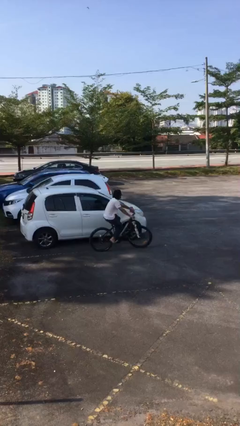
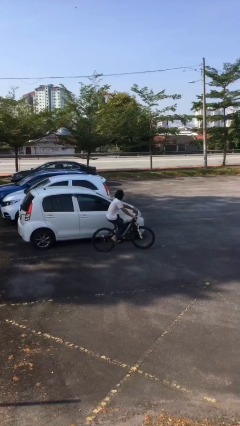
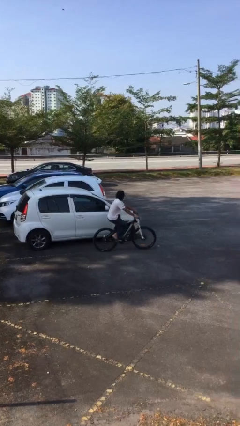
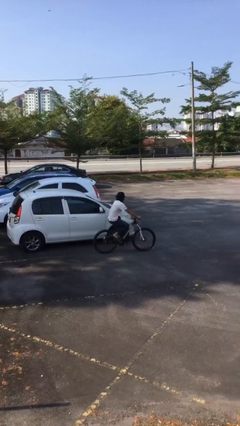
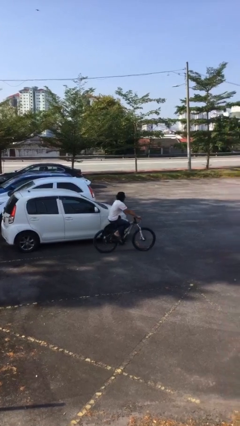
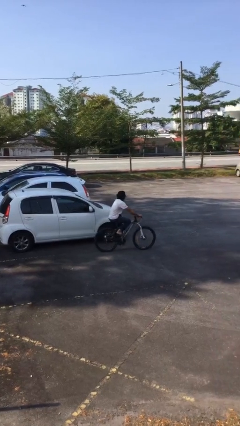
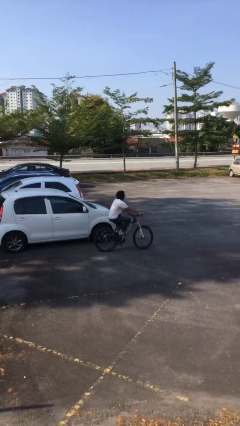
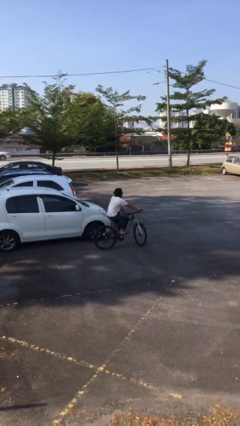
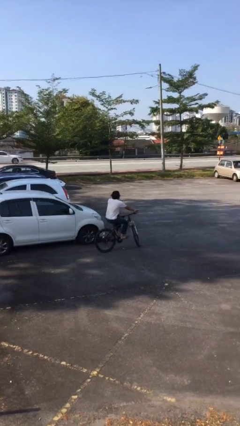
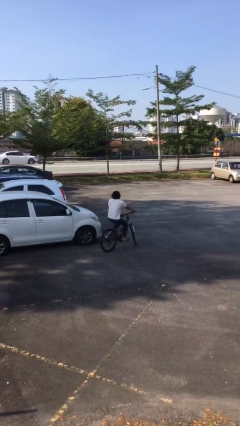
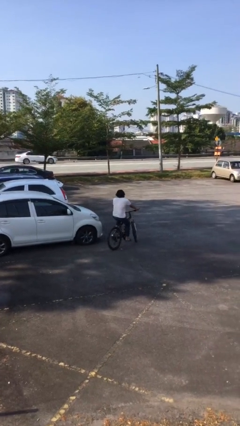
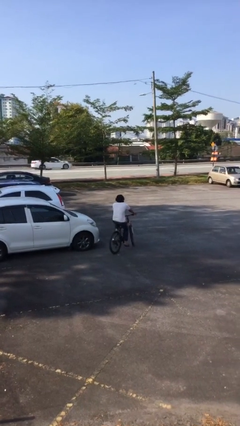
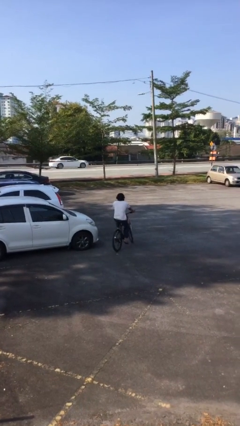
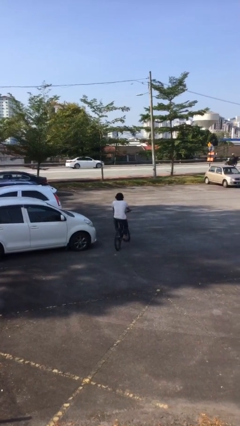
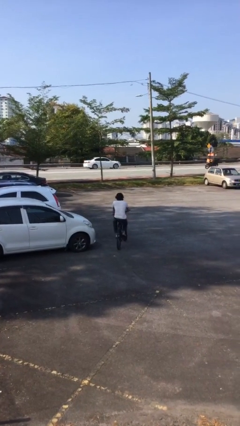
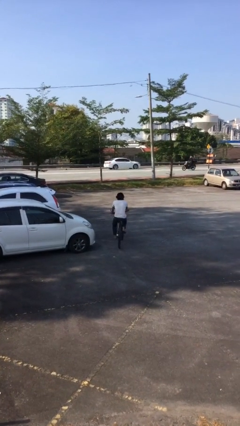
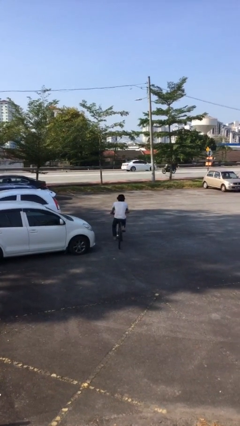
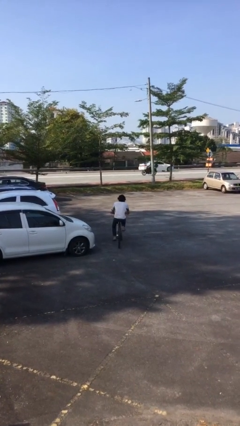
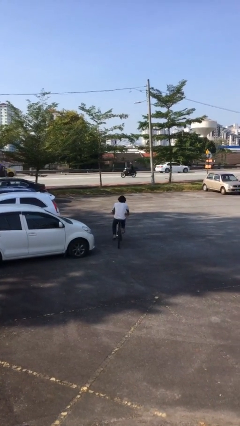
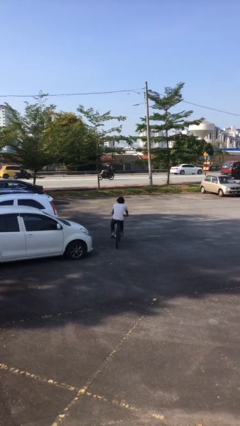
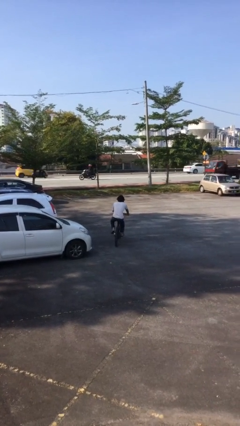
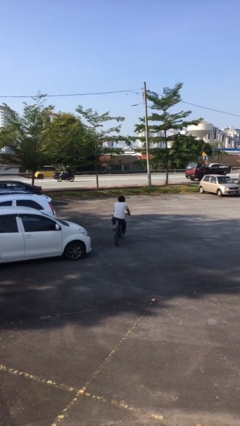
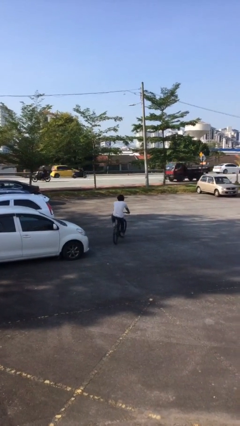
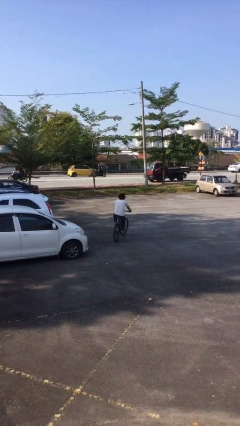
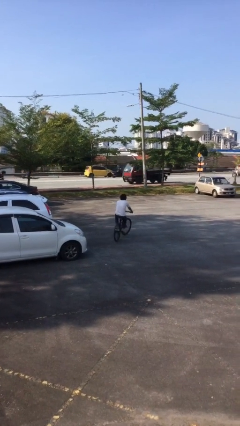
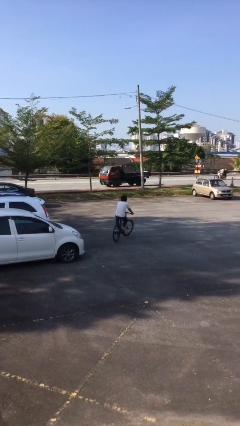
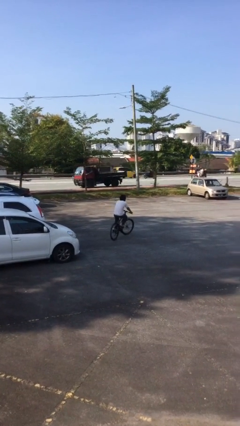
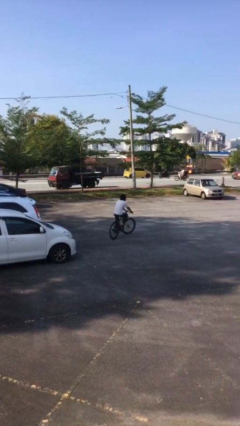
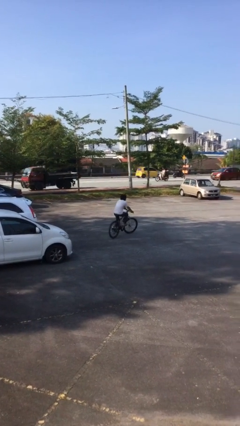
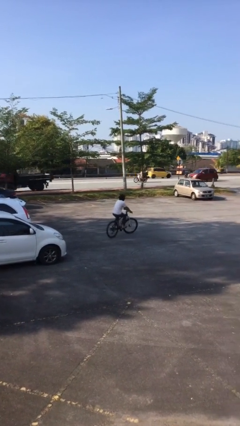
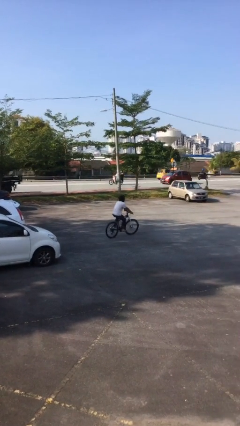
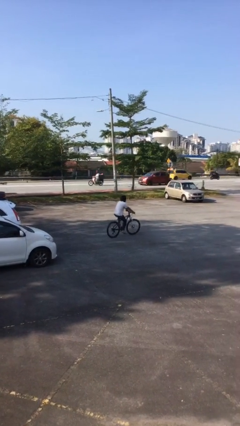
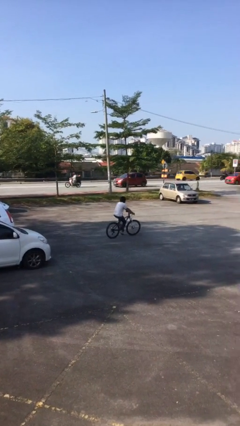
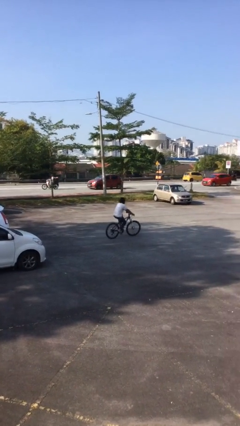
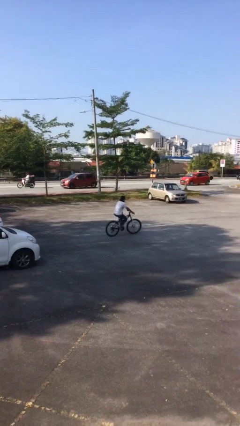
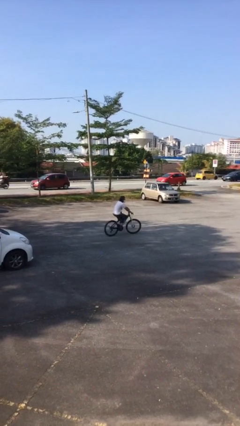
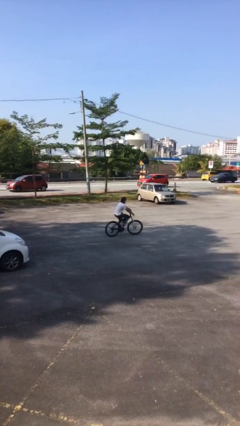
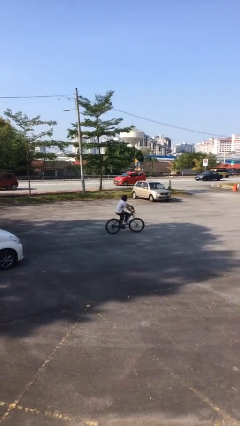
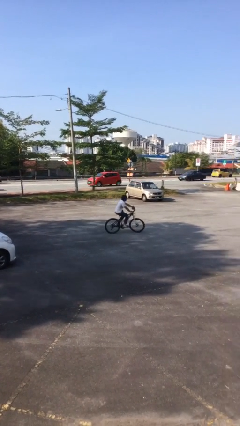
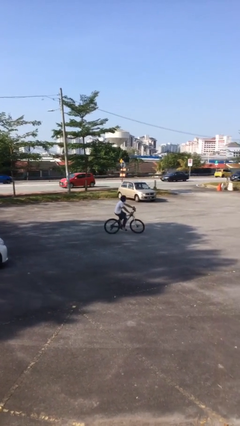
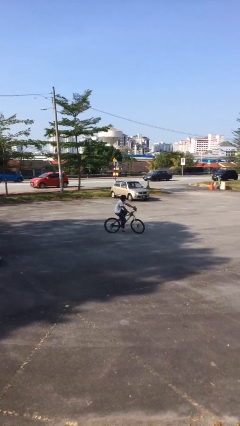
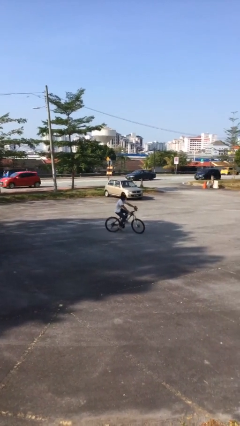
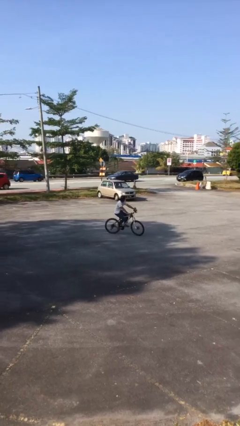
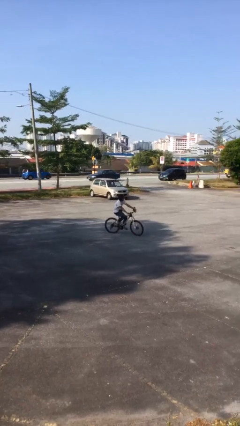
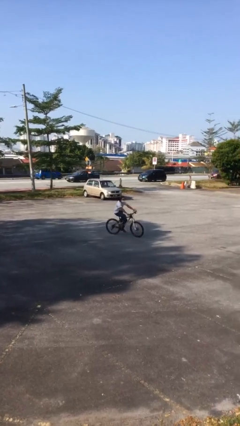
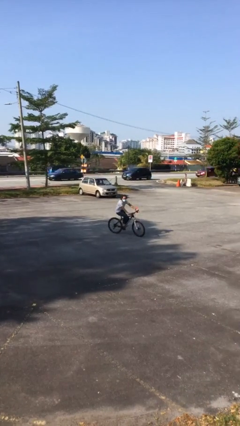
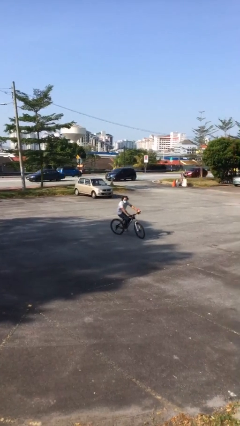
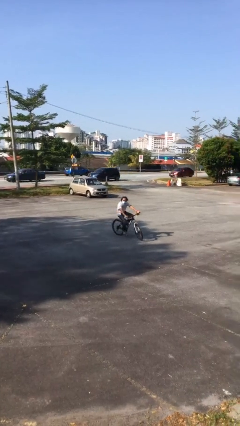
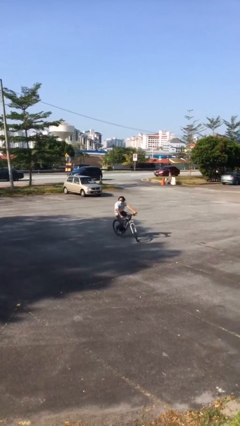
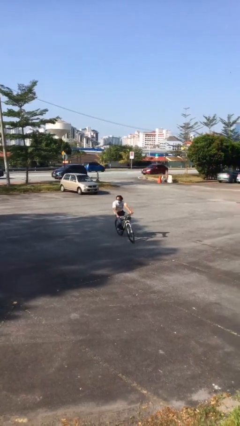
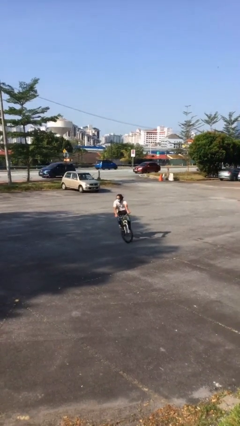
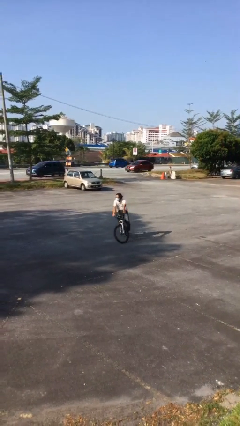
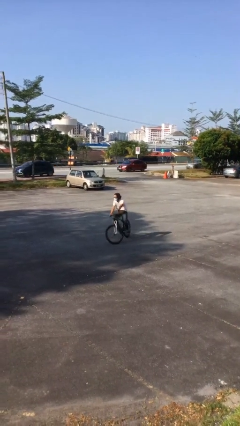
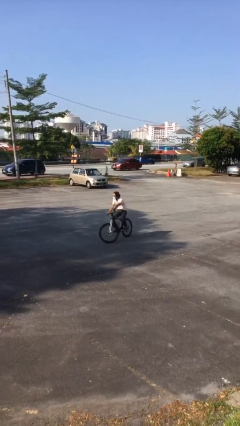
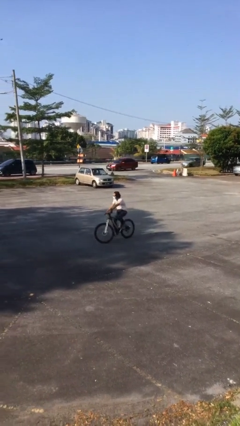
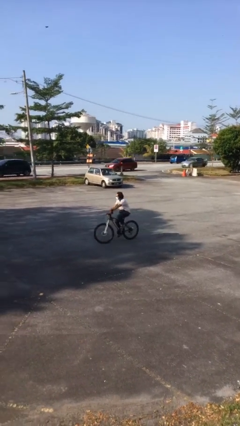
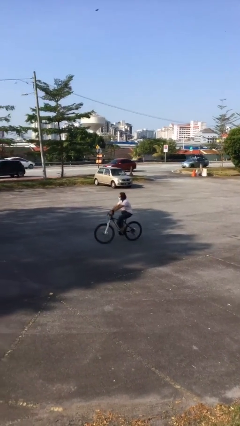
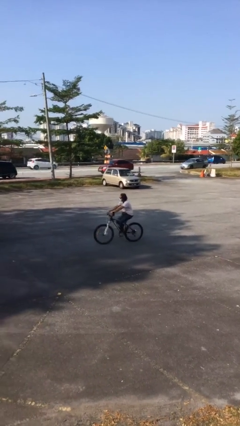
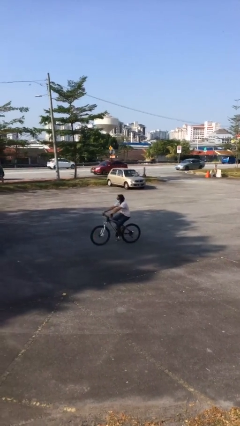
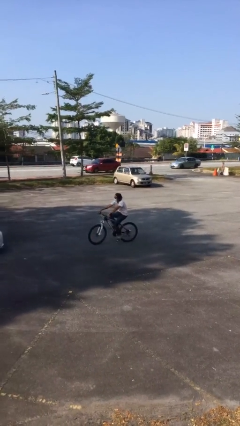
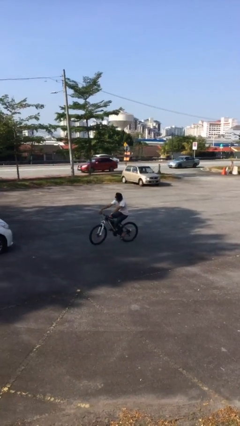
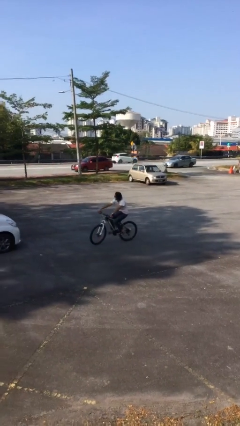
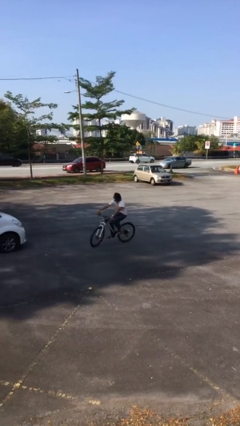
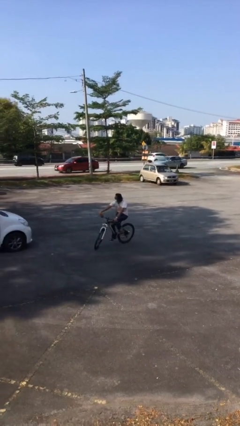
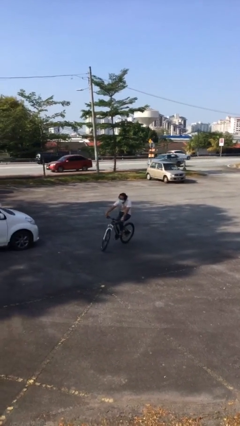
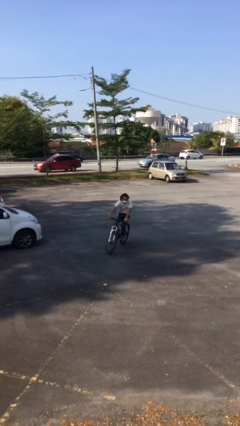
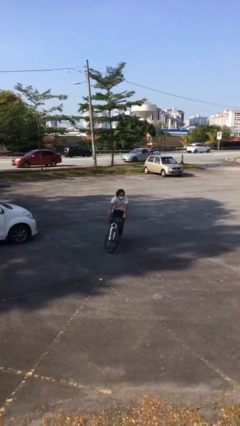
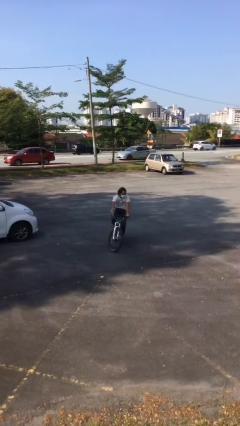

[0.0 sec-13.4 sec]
person rides bicycle

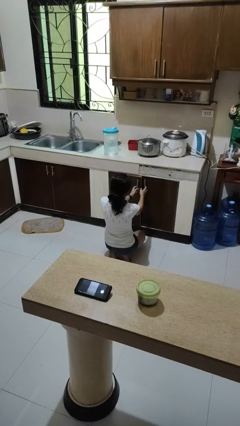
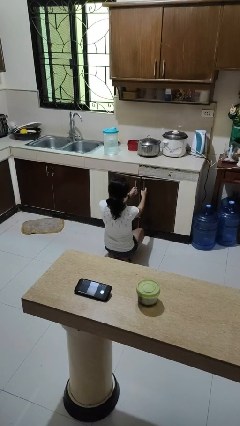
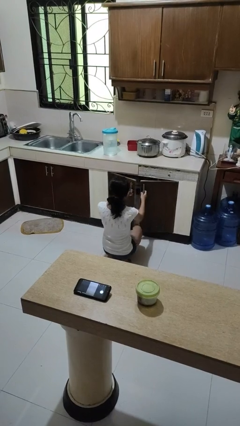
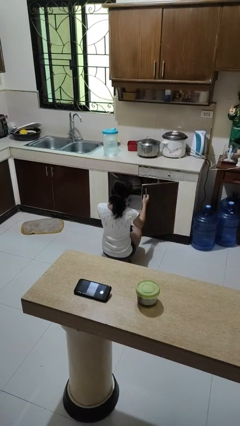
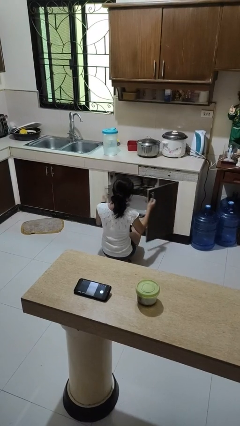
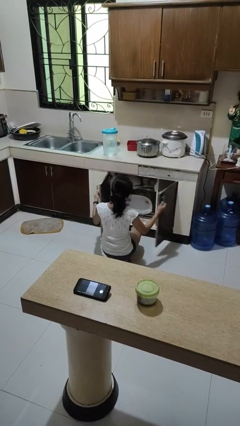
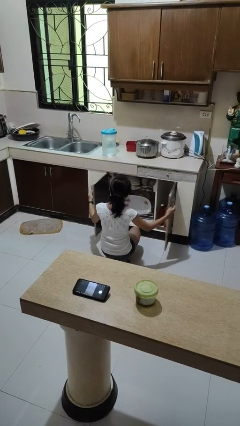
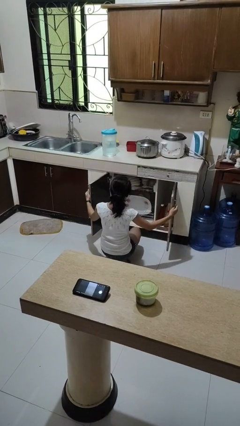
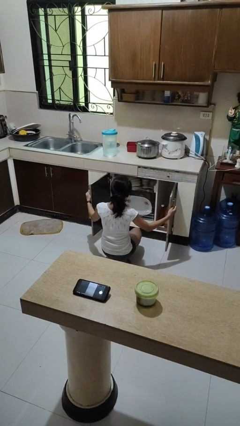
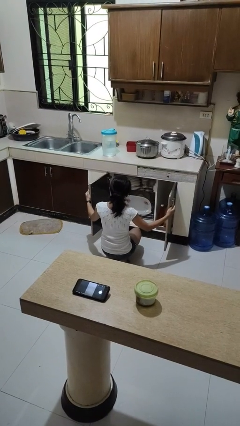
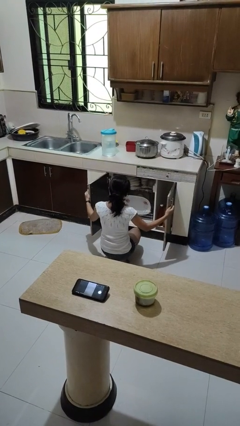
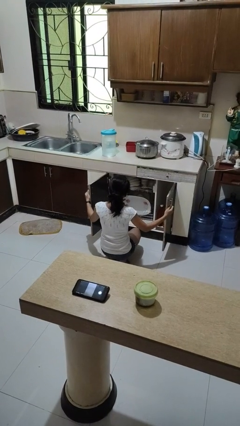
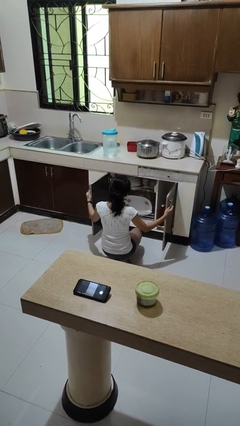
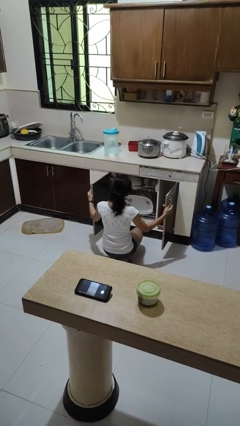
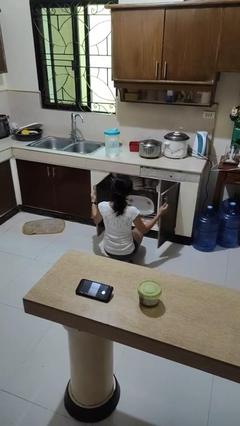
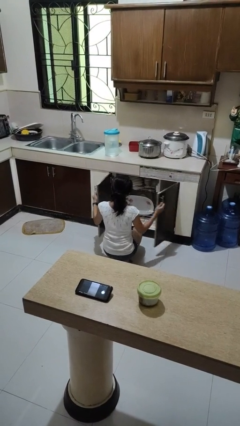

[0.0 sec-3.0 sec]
person opens dishwasher

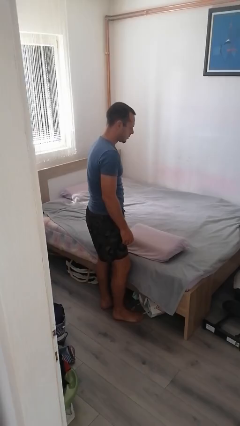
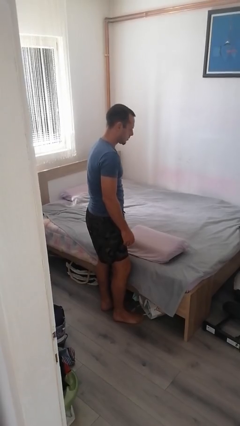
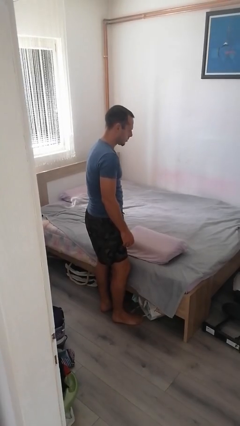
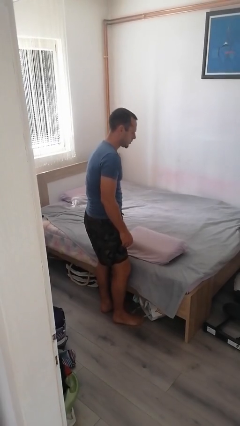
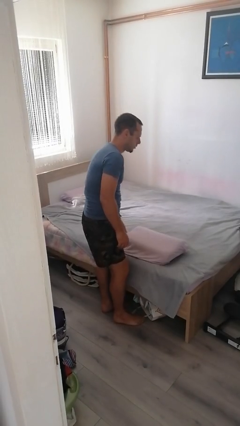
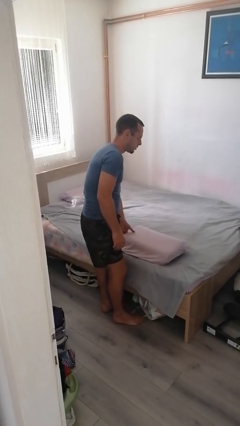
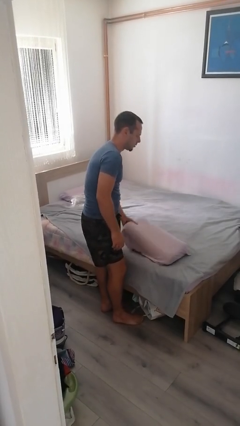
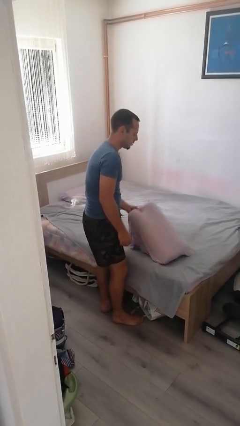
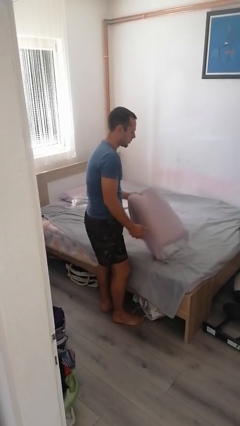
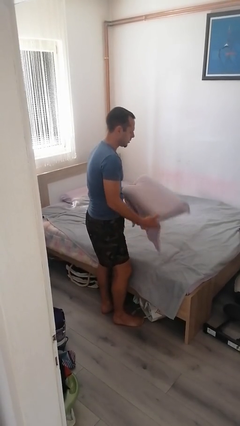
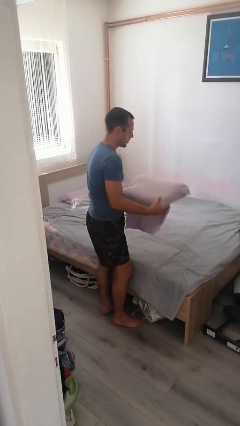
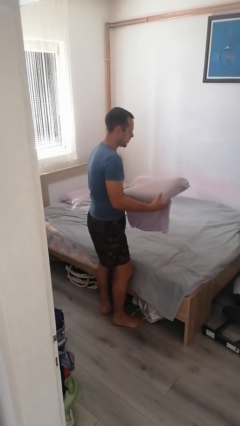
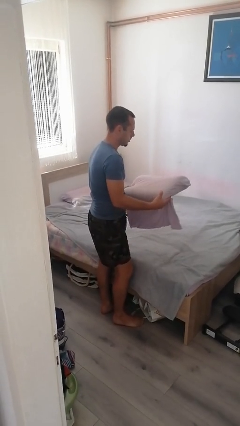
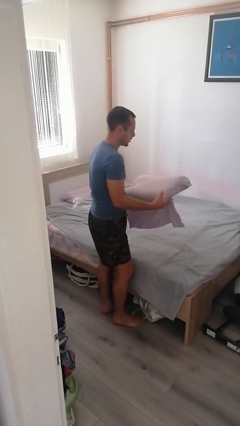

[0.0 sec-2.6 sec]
person picks up object from bed
